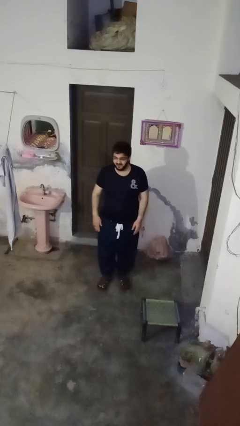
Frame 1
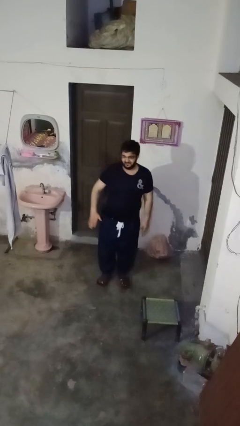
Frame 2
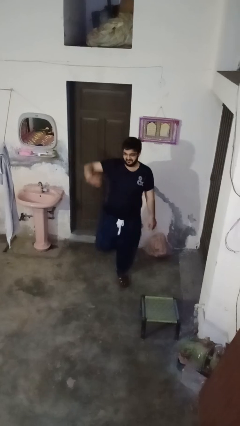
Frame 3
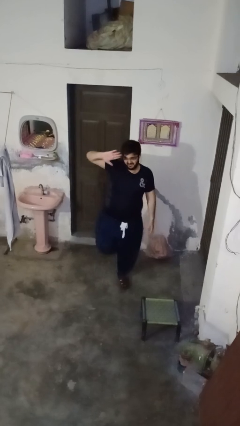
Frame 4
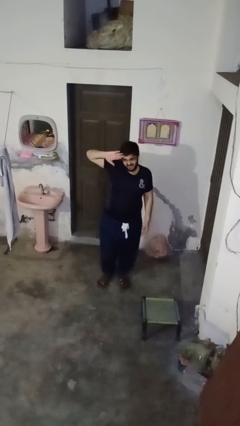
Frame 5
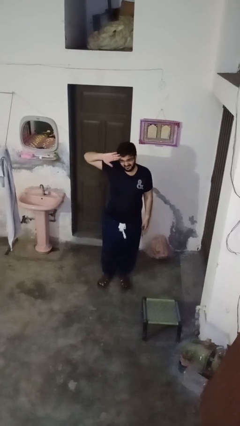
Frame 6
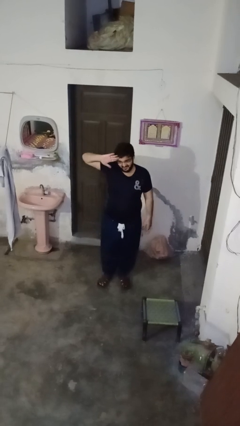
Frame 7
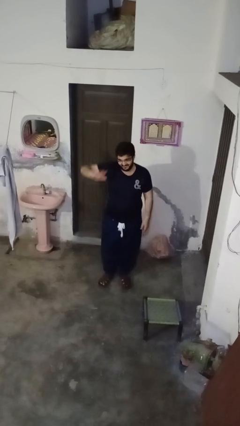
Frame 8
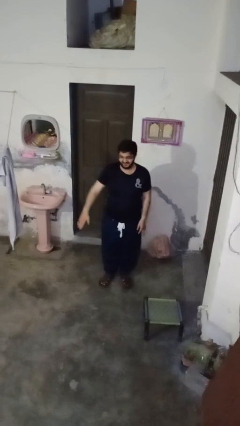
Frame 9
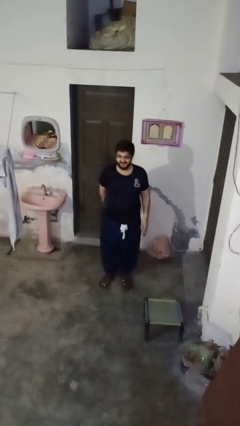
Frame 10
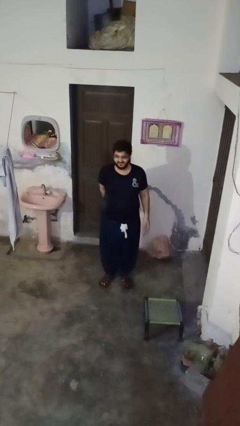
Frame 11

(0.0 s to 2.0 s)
person salutes

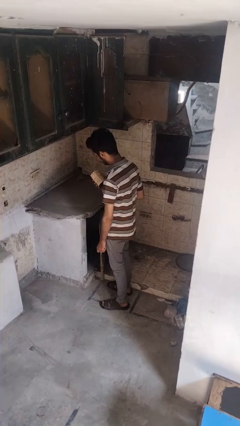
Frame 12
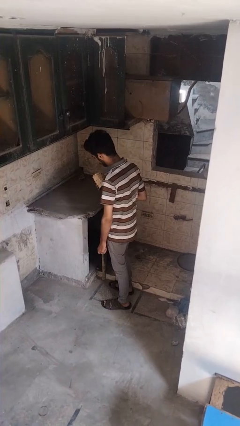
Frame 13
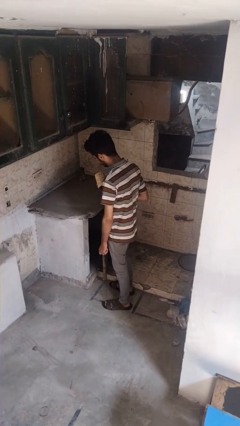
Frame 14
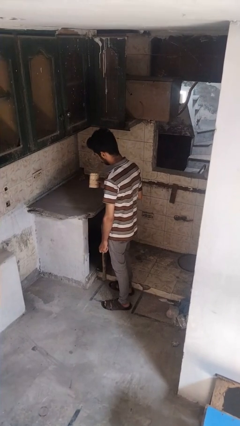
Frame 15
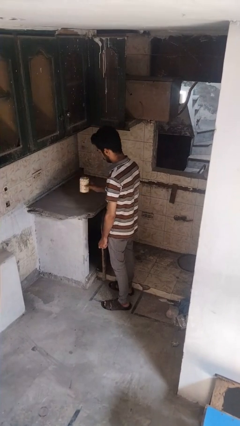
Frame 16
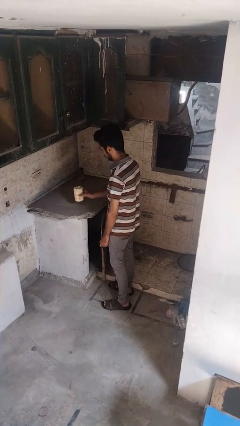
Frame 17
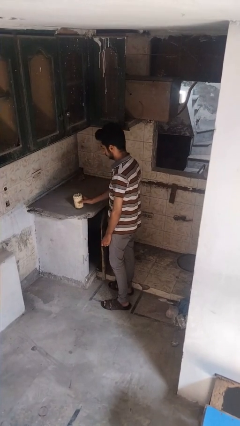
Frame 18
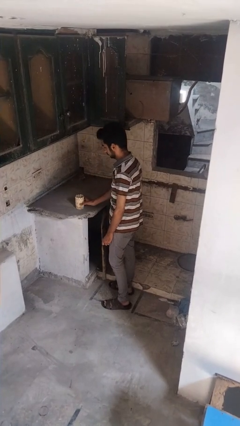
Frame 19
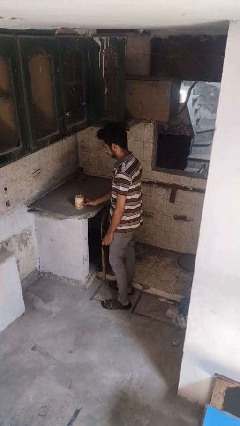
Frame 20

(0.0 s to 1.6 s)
person puts down object on countertop

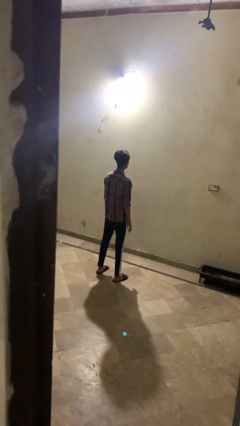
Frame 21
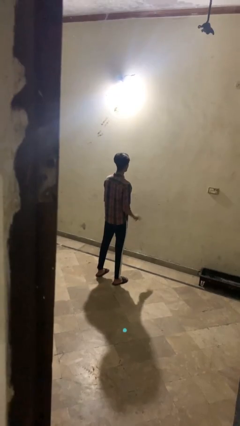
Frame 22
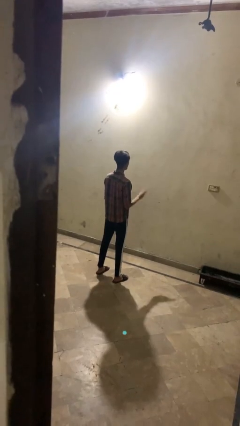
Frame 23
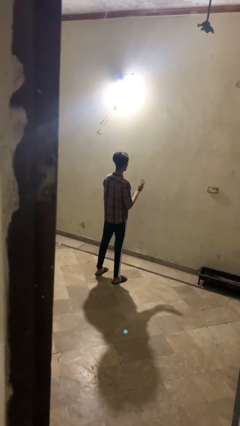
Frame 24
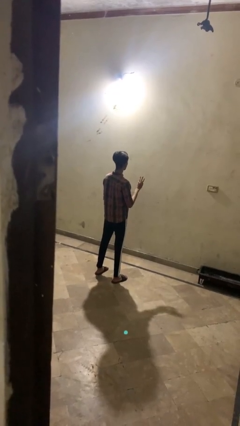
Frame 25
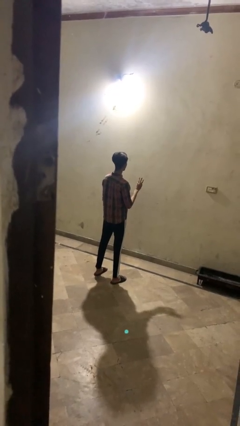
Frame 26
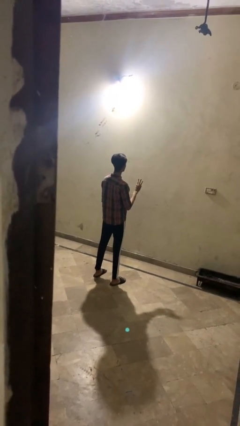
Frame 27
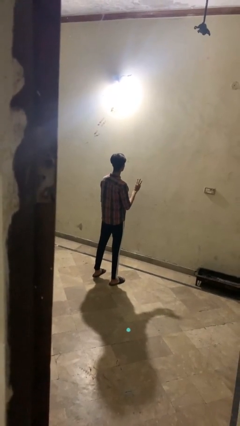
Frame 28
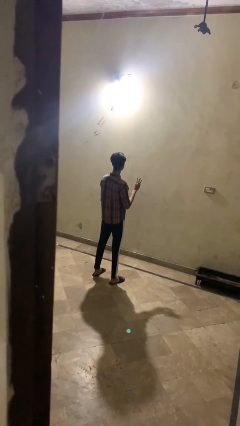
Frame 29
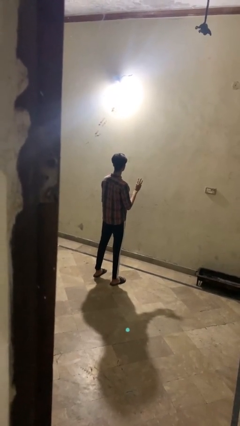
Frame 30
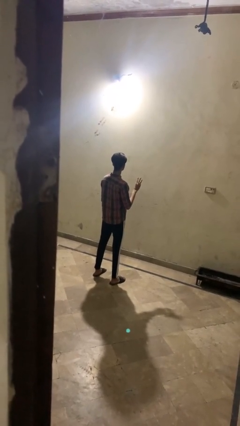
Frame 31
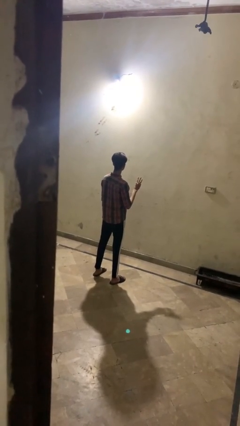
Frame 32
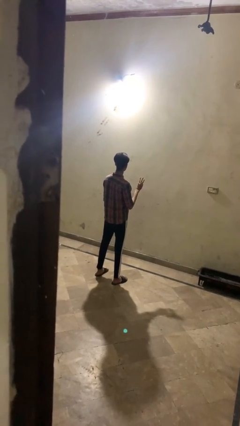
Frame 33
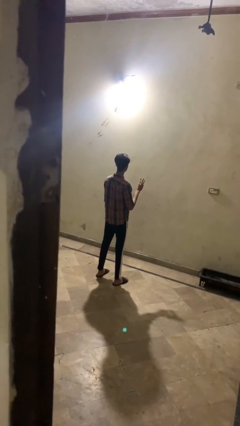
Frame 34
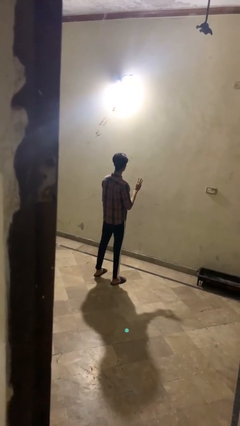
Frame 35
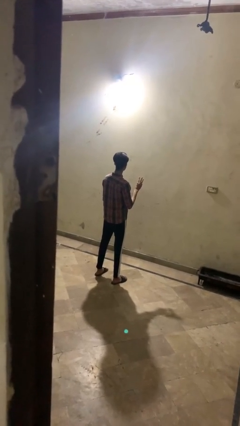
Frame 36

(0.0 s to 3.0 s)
person gestures number three

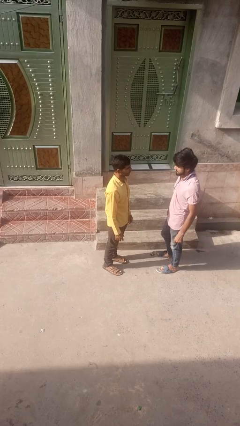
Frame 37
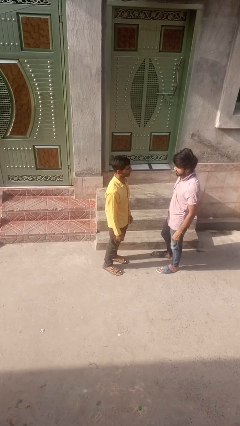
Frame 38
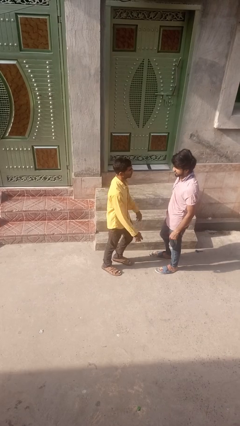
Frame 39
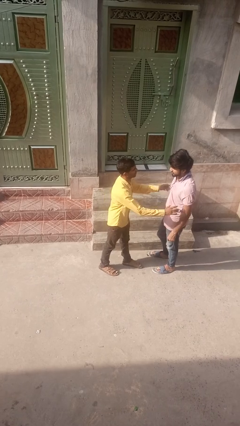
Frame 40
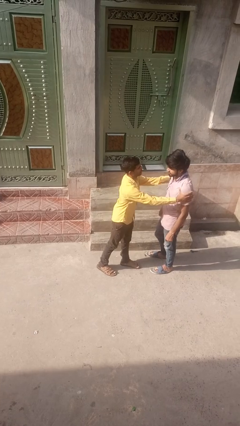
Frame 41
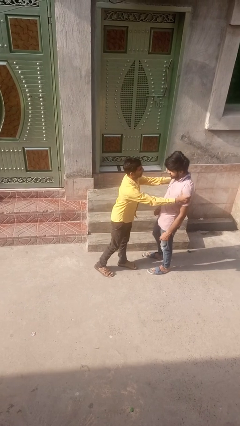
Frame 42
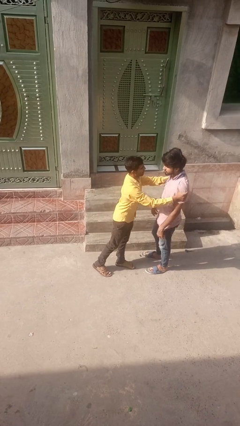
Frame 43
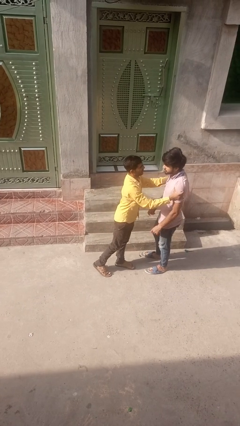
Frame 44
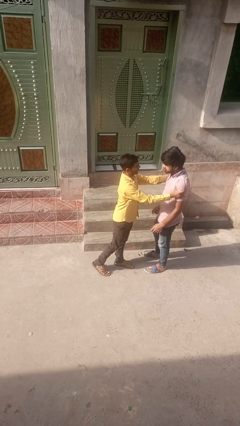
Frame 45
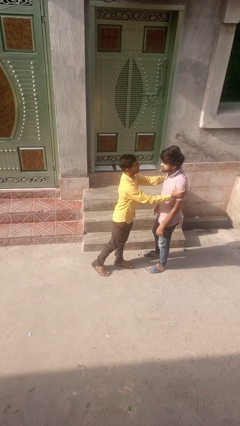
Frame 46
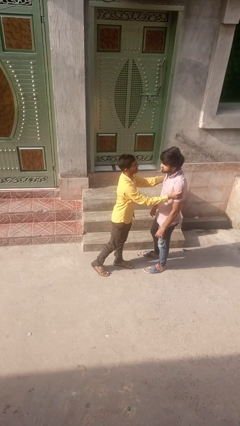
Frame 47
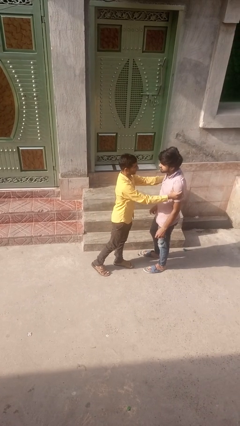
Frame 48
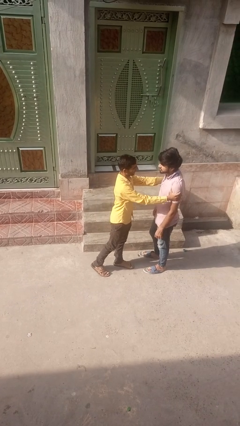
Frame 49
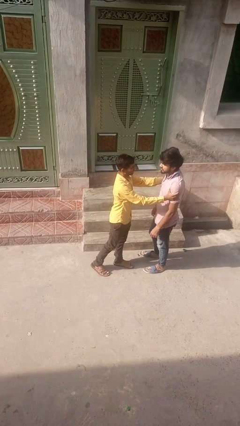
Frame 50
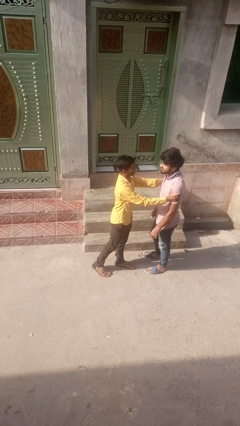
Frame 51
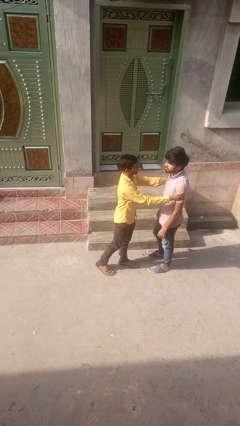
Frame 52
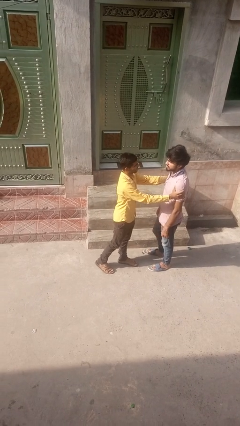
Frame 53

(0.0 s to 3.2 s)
person grabs person by bicep

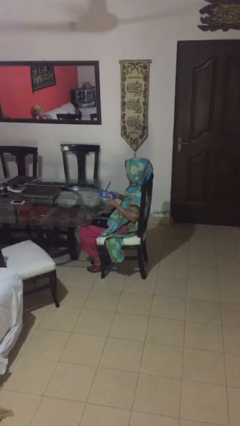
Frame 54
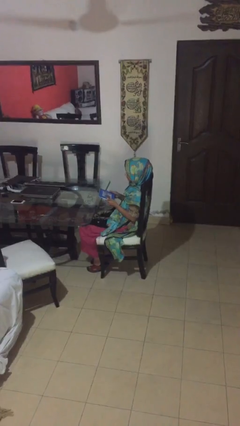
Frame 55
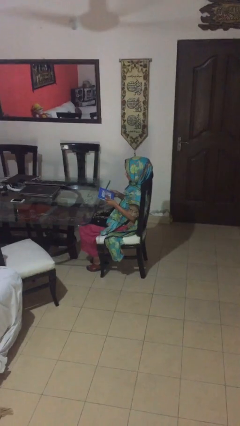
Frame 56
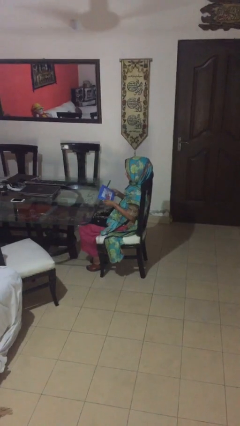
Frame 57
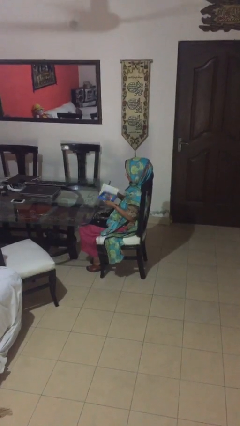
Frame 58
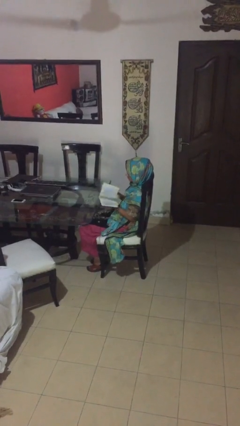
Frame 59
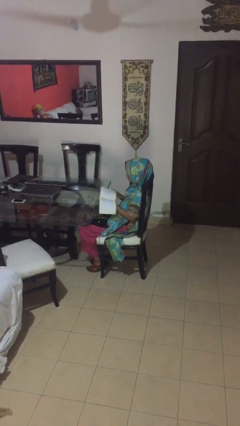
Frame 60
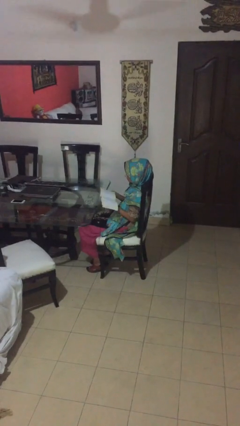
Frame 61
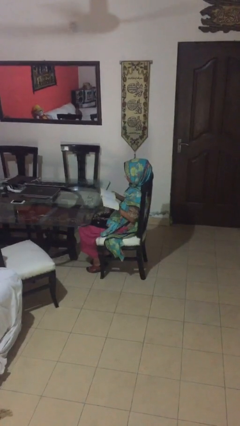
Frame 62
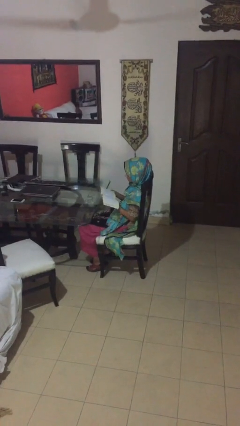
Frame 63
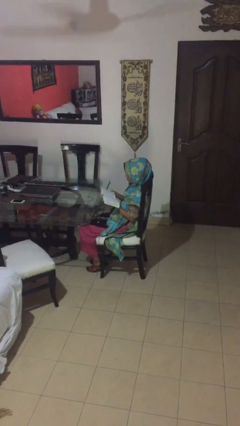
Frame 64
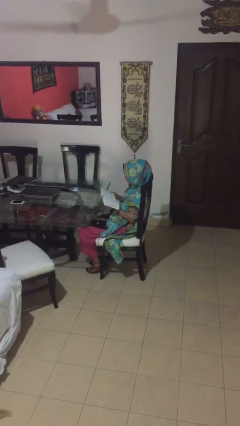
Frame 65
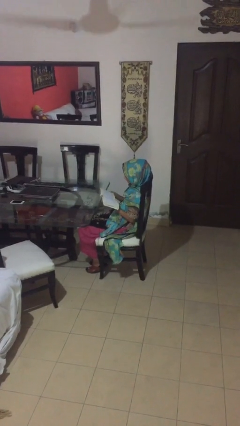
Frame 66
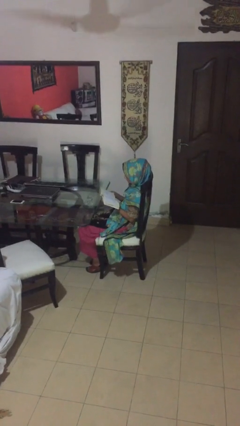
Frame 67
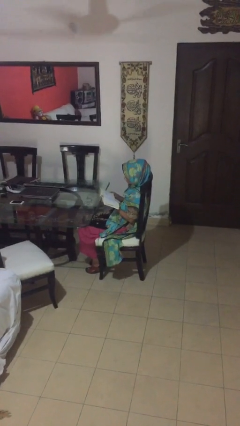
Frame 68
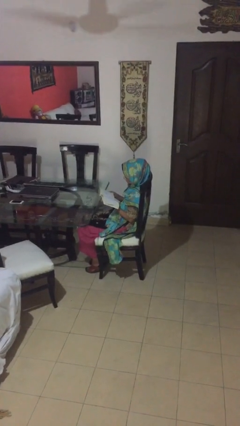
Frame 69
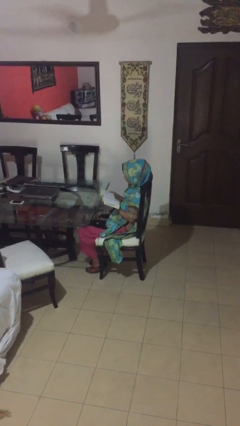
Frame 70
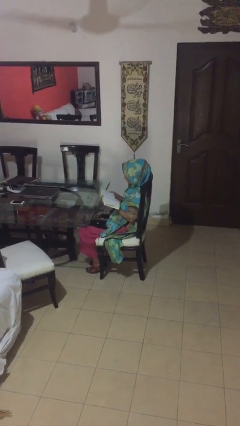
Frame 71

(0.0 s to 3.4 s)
person reads document

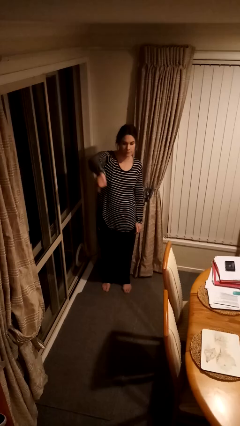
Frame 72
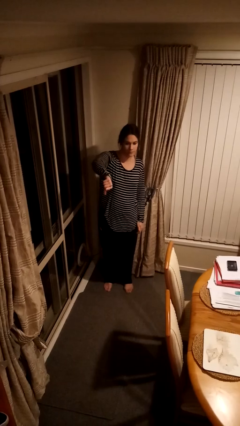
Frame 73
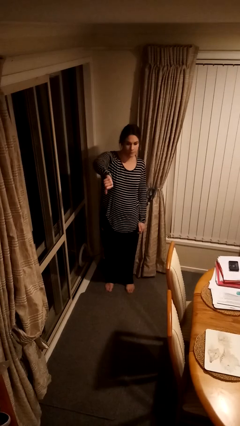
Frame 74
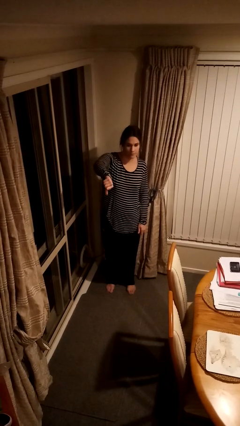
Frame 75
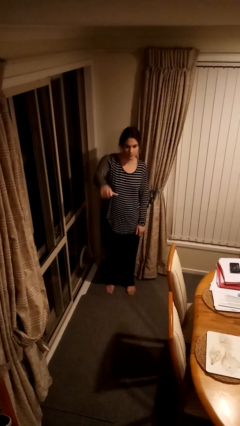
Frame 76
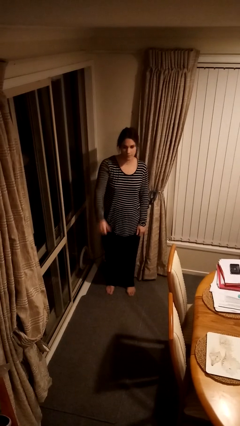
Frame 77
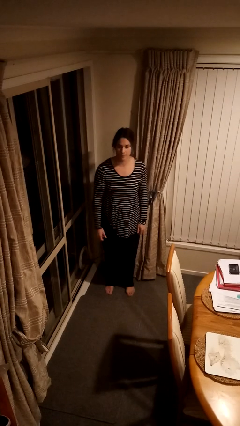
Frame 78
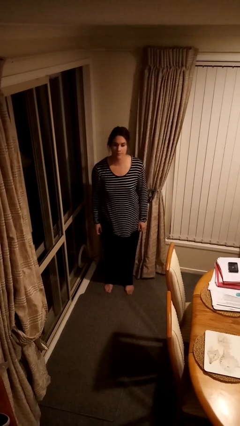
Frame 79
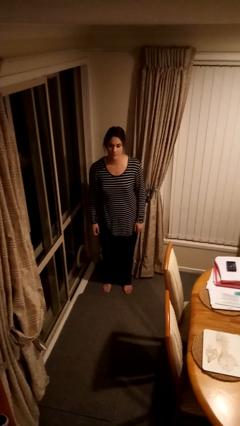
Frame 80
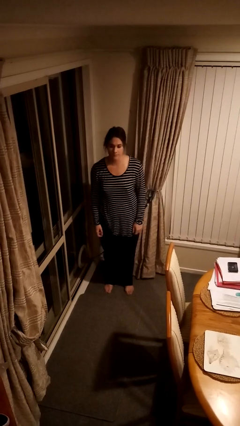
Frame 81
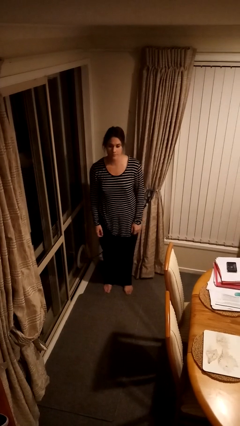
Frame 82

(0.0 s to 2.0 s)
person gestures thumbs down

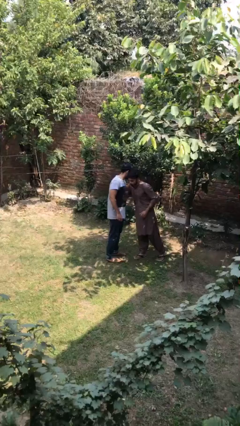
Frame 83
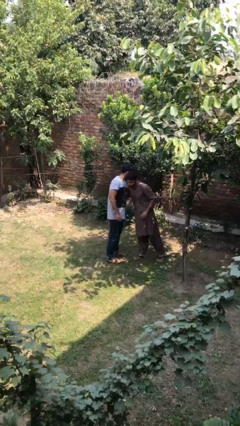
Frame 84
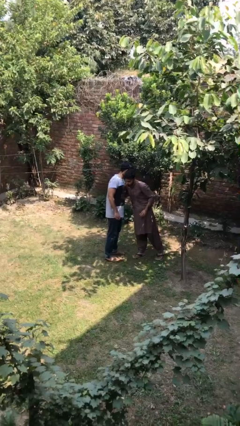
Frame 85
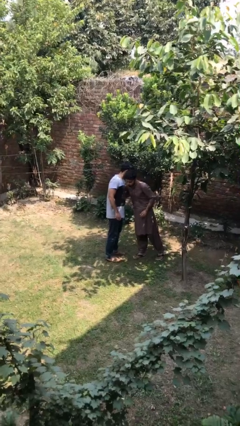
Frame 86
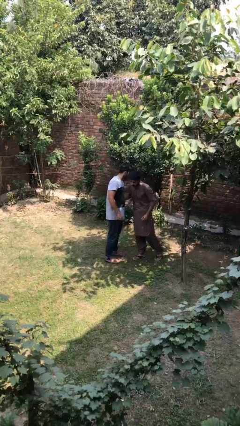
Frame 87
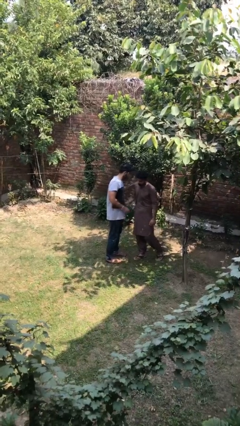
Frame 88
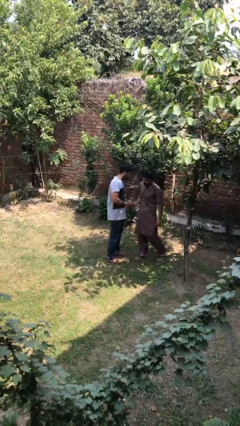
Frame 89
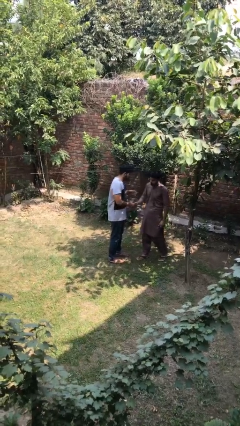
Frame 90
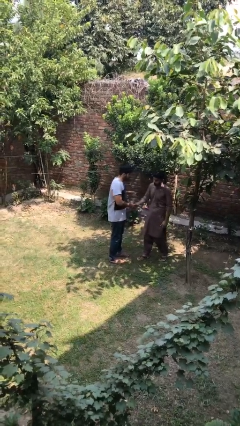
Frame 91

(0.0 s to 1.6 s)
person embraces person

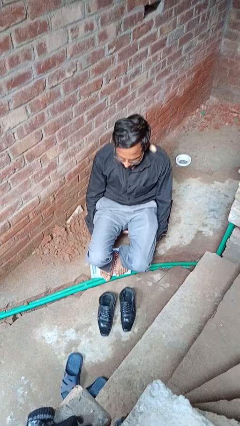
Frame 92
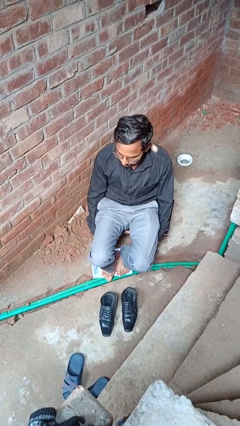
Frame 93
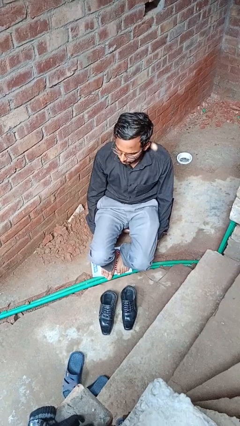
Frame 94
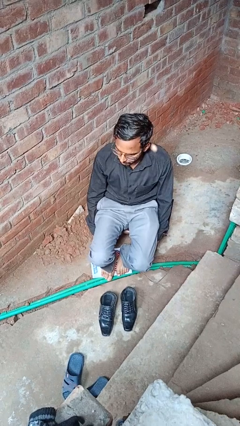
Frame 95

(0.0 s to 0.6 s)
person takes off shoes
